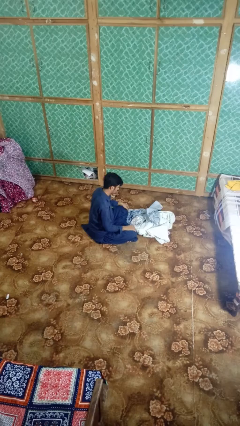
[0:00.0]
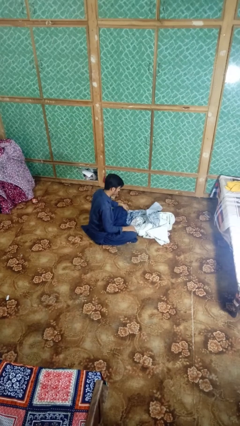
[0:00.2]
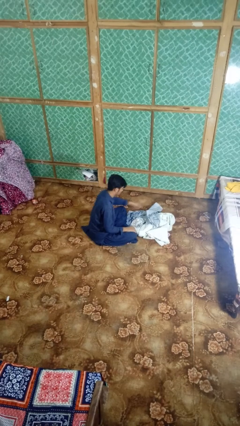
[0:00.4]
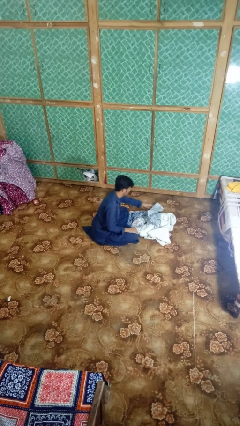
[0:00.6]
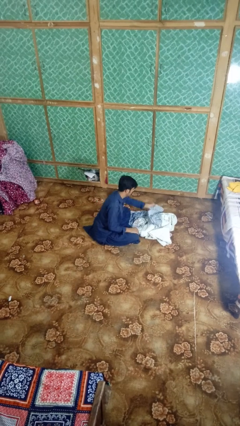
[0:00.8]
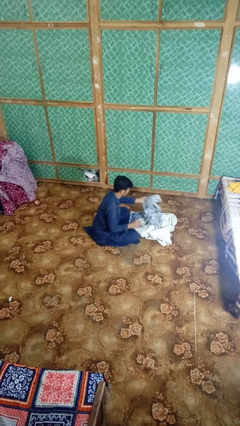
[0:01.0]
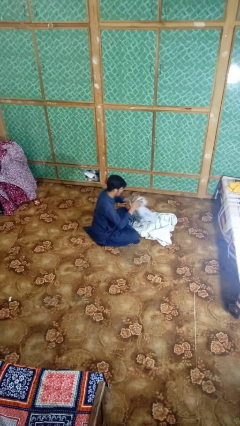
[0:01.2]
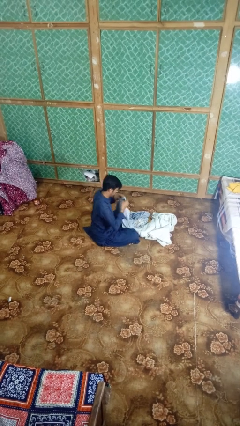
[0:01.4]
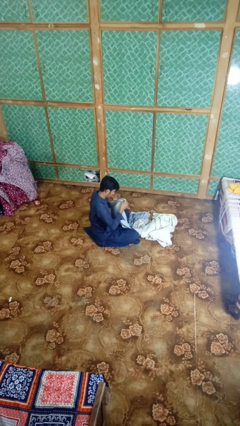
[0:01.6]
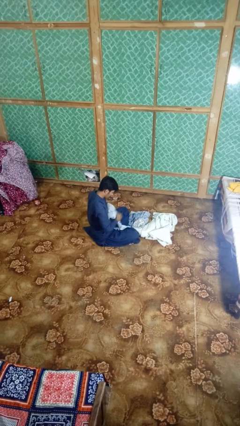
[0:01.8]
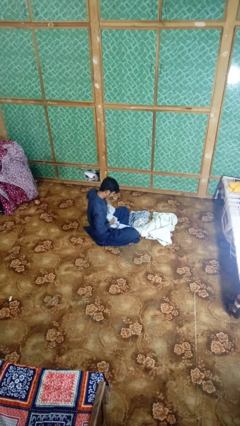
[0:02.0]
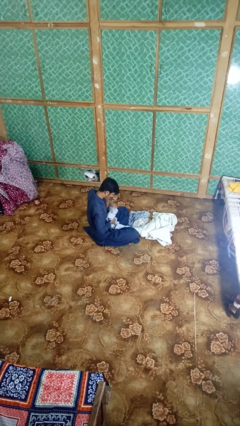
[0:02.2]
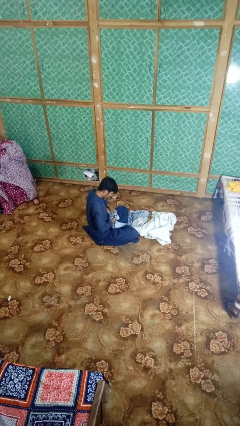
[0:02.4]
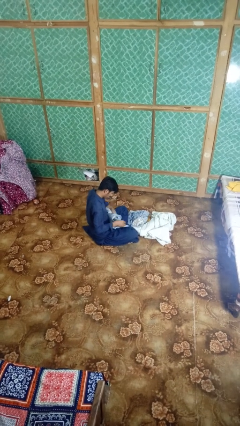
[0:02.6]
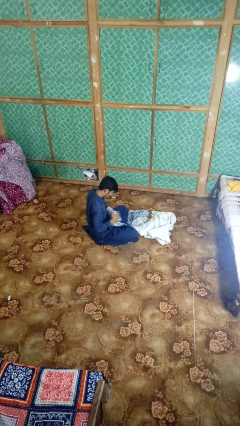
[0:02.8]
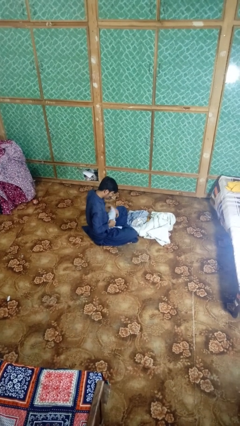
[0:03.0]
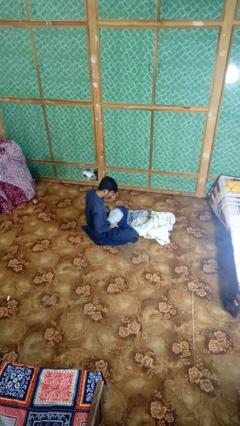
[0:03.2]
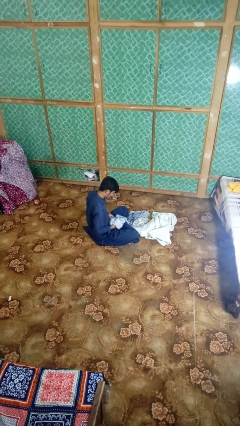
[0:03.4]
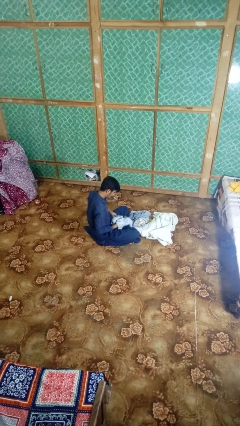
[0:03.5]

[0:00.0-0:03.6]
person folds shirt

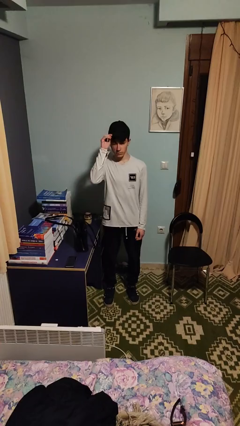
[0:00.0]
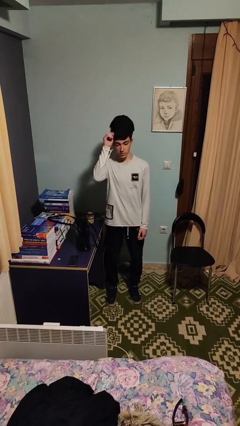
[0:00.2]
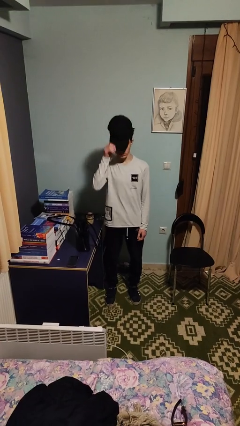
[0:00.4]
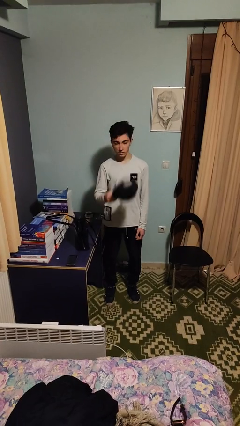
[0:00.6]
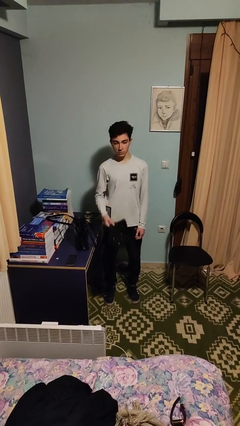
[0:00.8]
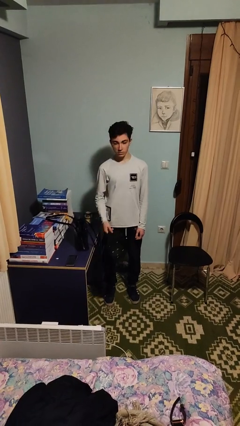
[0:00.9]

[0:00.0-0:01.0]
person takes off hat

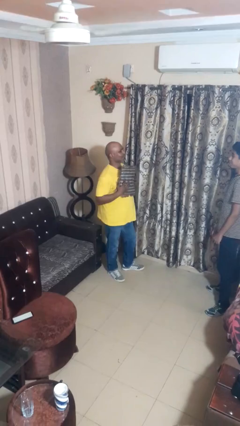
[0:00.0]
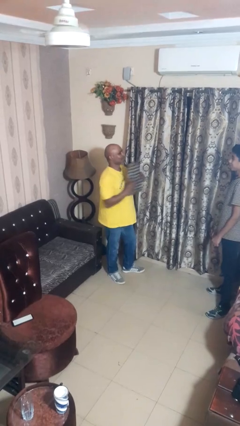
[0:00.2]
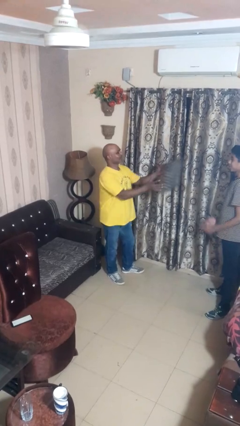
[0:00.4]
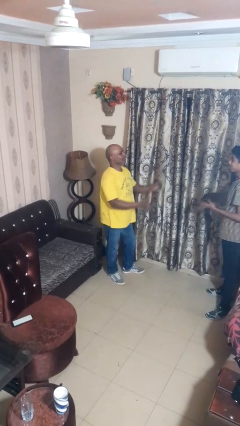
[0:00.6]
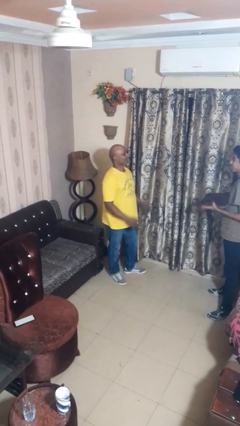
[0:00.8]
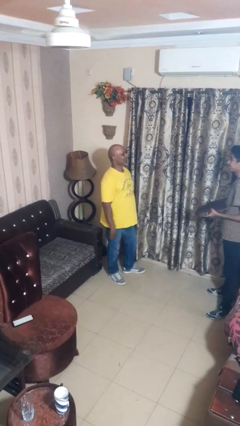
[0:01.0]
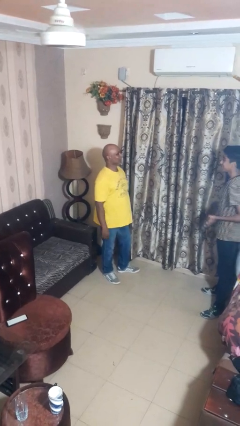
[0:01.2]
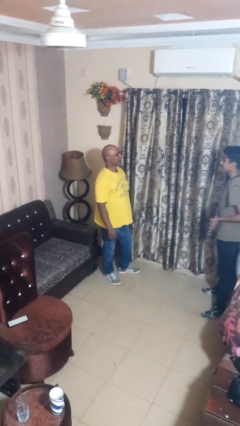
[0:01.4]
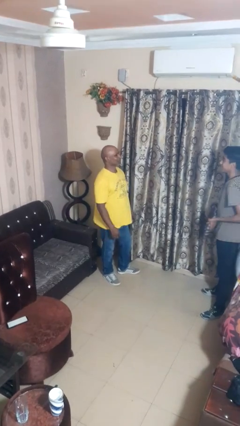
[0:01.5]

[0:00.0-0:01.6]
person throws object to person

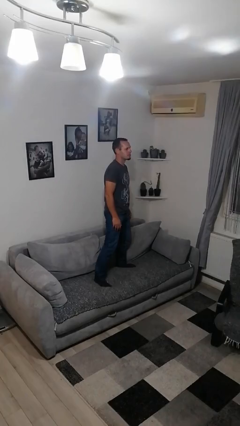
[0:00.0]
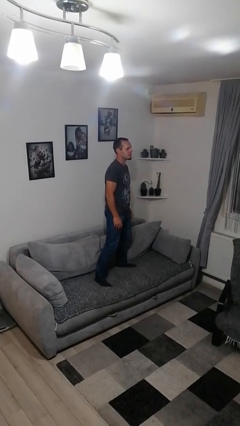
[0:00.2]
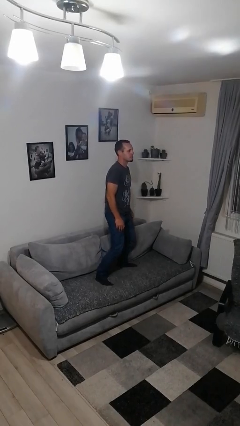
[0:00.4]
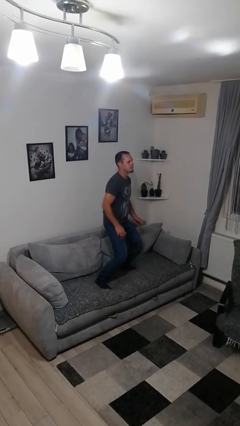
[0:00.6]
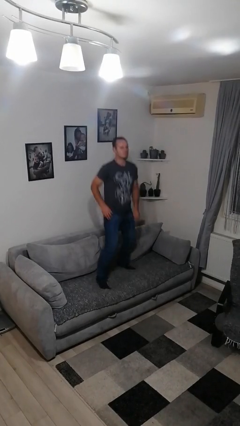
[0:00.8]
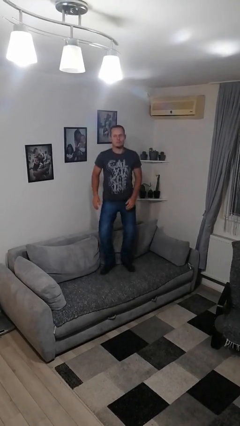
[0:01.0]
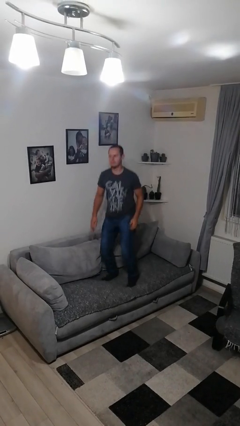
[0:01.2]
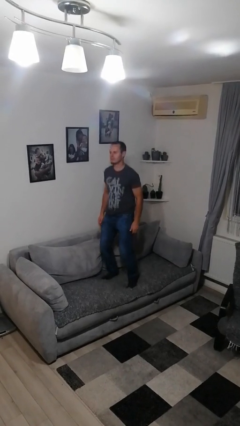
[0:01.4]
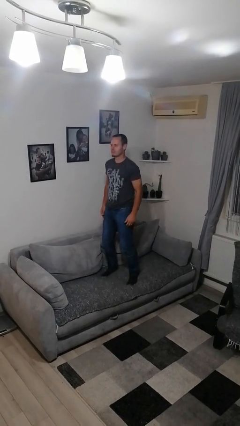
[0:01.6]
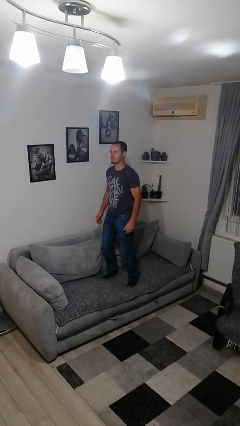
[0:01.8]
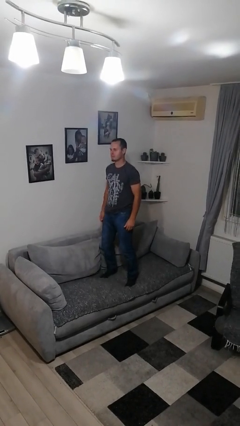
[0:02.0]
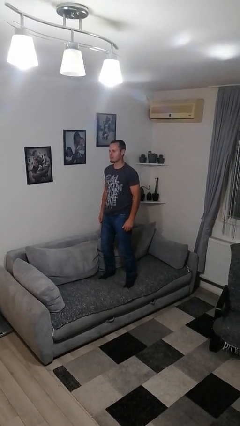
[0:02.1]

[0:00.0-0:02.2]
person jumps on couch

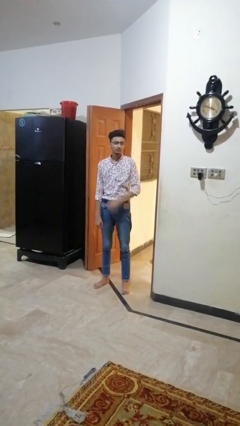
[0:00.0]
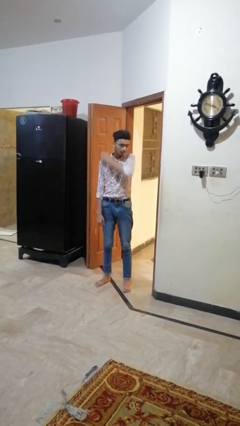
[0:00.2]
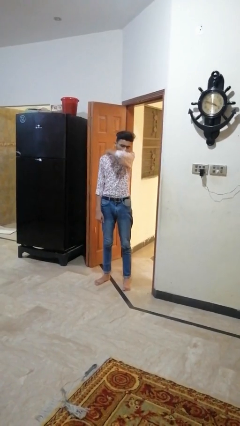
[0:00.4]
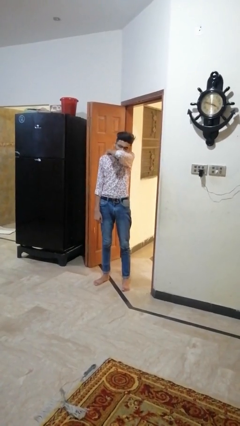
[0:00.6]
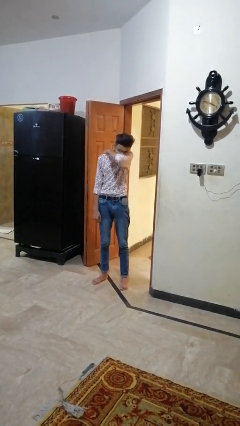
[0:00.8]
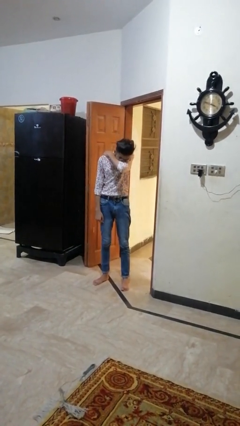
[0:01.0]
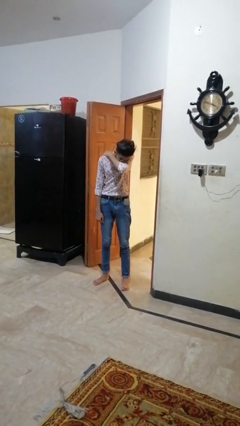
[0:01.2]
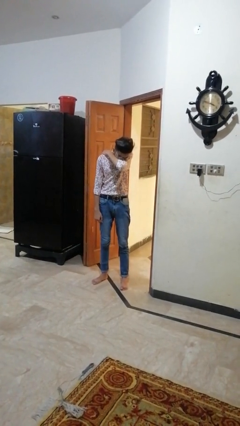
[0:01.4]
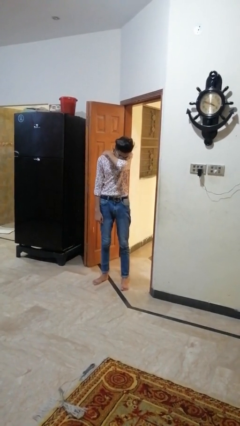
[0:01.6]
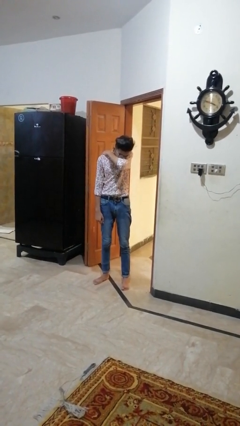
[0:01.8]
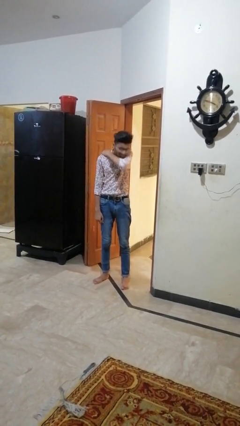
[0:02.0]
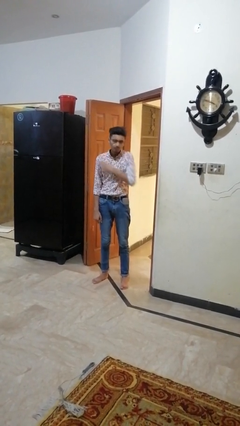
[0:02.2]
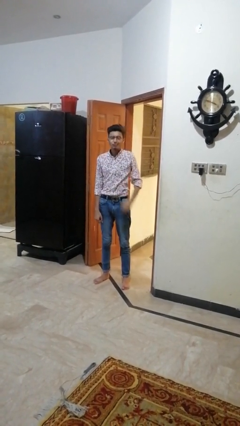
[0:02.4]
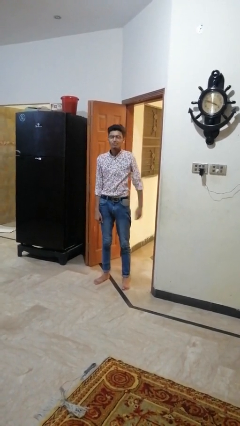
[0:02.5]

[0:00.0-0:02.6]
person sneezes into arm

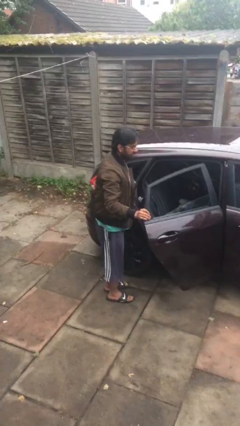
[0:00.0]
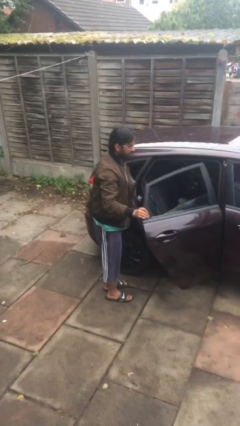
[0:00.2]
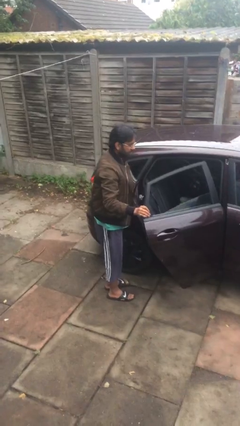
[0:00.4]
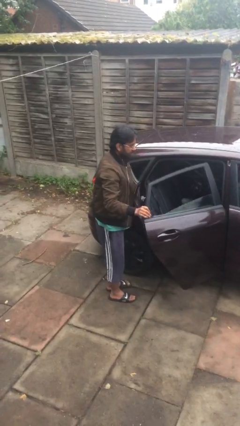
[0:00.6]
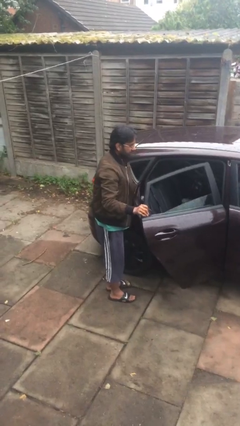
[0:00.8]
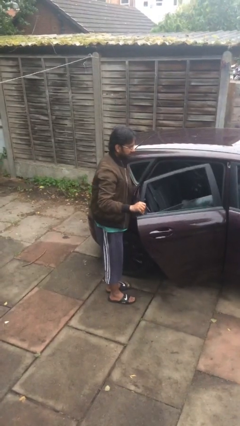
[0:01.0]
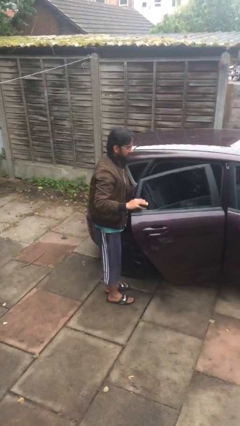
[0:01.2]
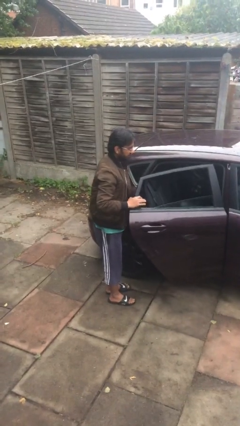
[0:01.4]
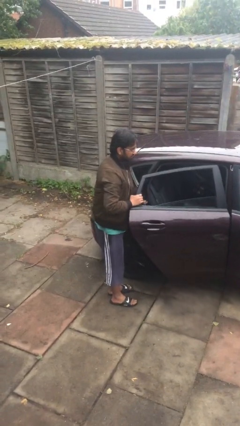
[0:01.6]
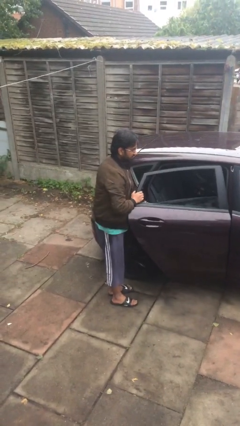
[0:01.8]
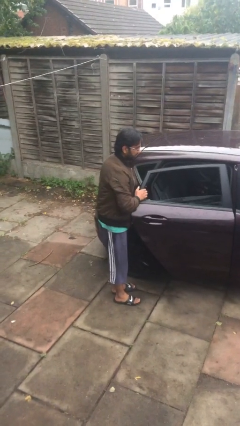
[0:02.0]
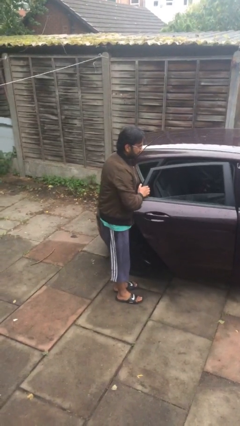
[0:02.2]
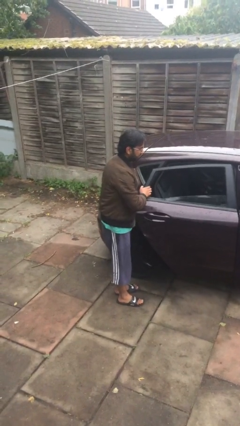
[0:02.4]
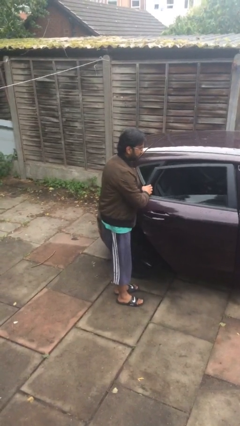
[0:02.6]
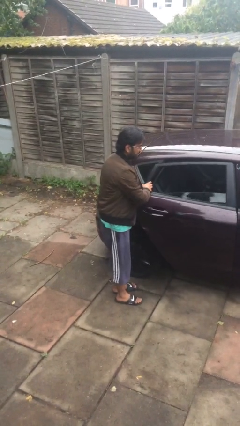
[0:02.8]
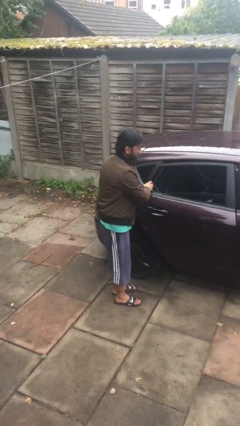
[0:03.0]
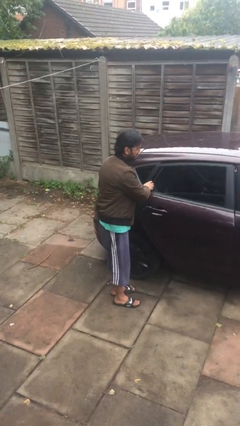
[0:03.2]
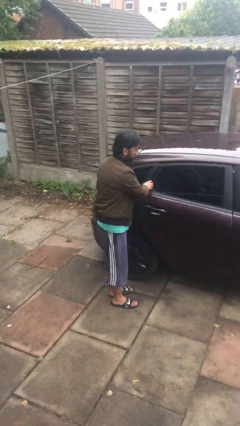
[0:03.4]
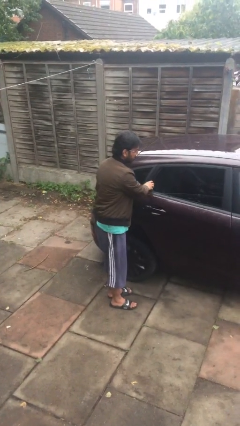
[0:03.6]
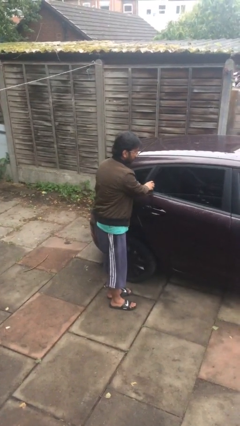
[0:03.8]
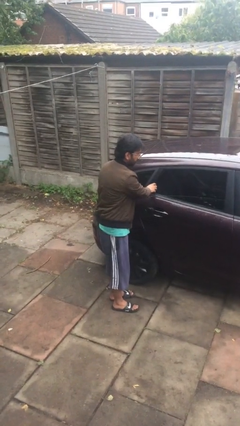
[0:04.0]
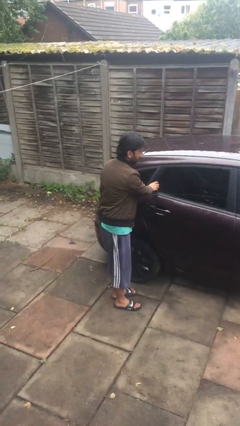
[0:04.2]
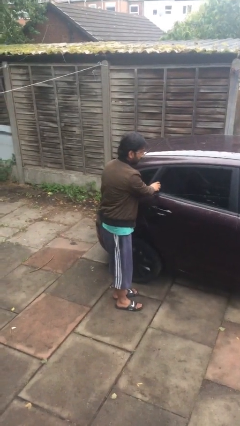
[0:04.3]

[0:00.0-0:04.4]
person closes car door

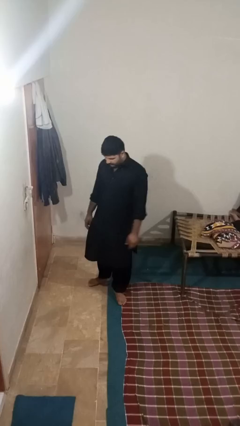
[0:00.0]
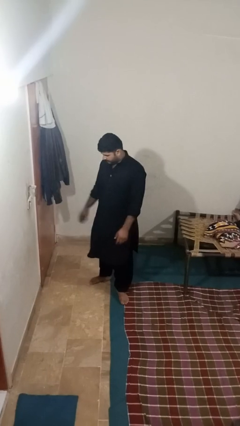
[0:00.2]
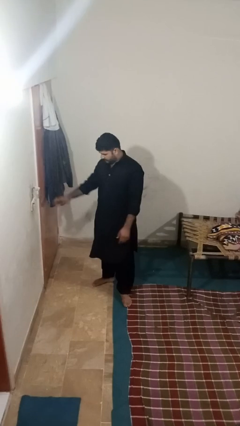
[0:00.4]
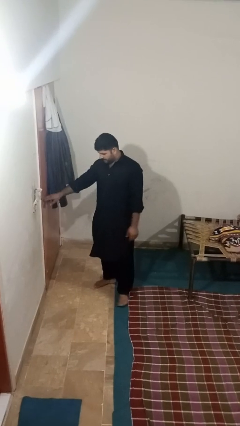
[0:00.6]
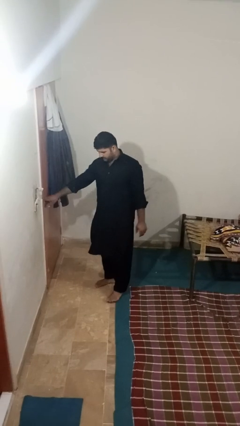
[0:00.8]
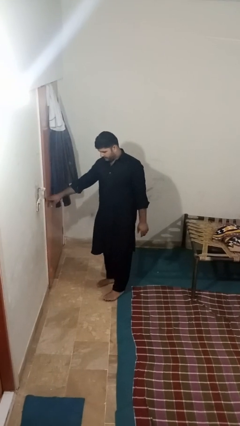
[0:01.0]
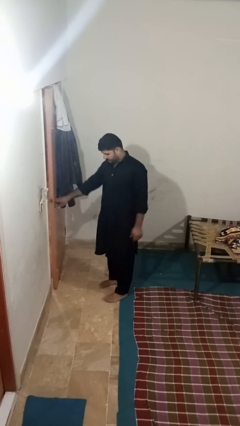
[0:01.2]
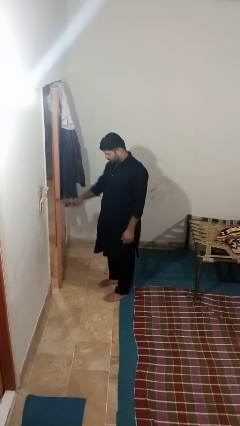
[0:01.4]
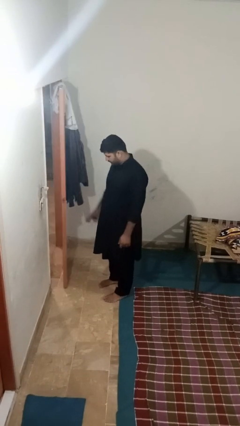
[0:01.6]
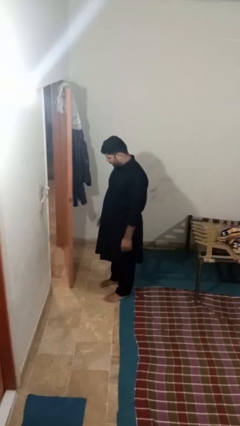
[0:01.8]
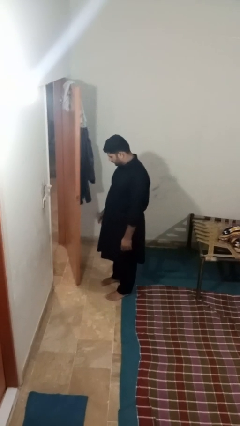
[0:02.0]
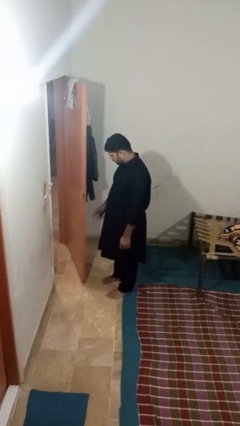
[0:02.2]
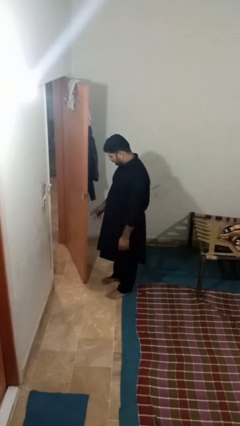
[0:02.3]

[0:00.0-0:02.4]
person opens facility door
